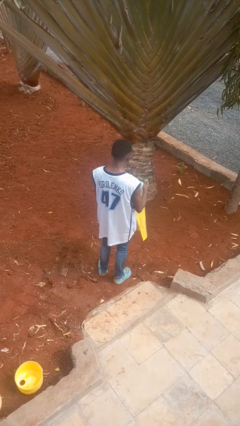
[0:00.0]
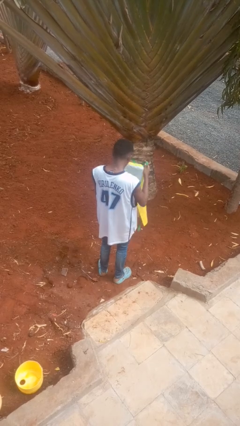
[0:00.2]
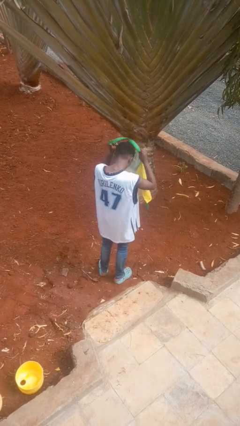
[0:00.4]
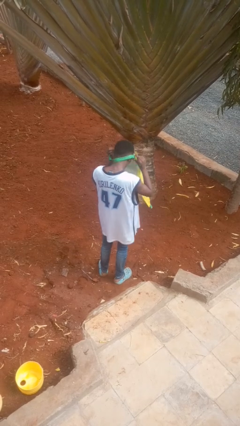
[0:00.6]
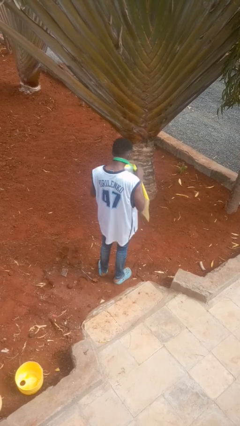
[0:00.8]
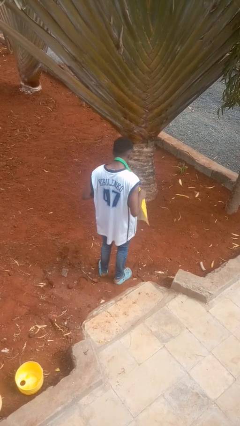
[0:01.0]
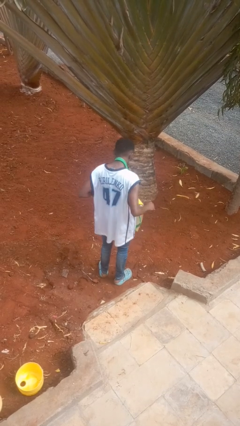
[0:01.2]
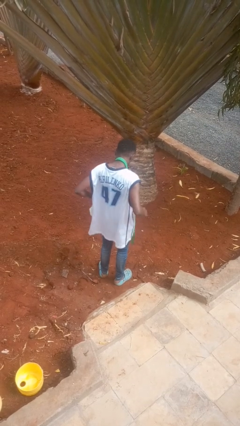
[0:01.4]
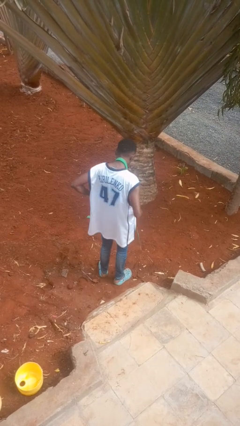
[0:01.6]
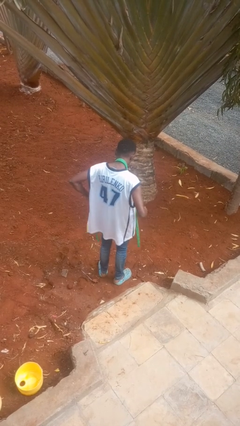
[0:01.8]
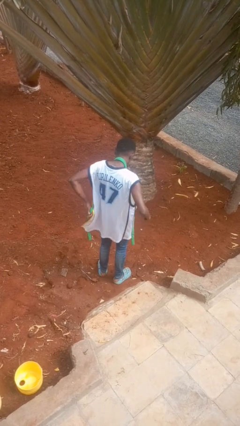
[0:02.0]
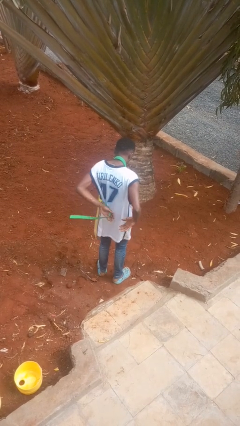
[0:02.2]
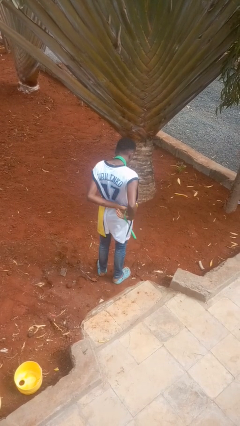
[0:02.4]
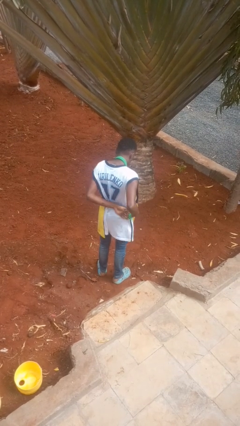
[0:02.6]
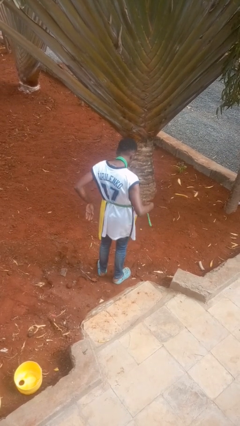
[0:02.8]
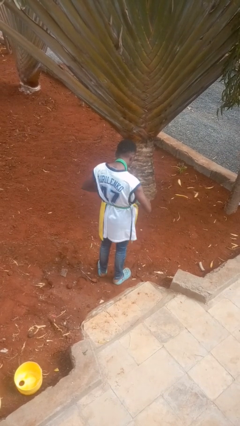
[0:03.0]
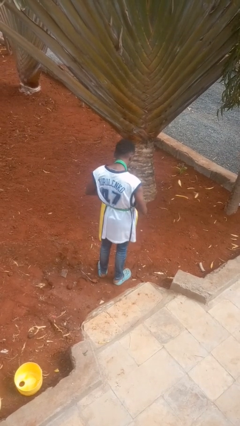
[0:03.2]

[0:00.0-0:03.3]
person puts on apron

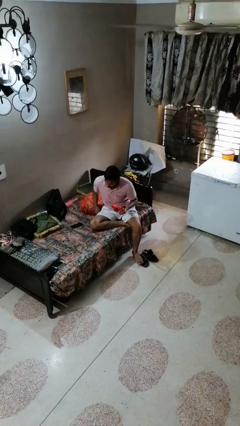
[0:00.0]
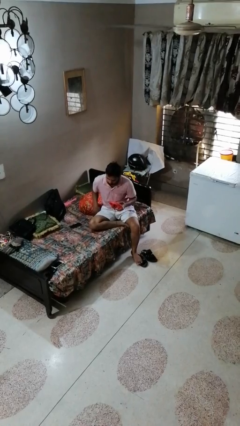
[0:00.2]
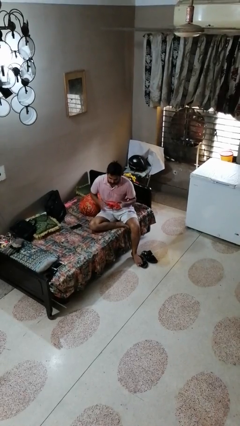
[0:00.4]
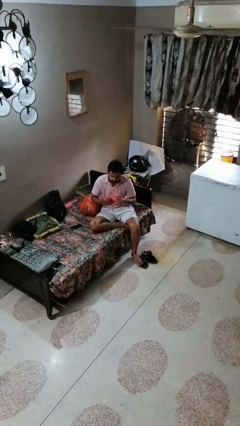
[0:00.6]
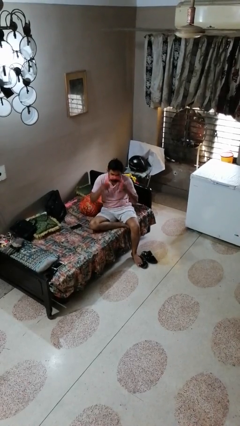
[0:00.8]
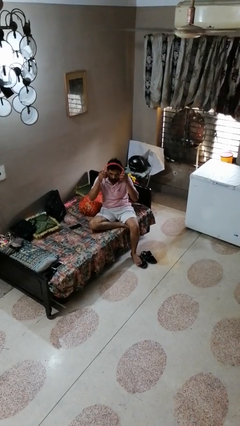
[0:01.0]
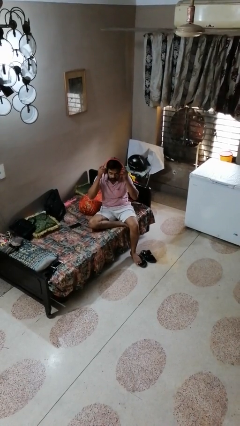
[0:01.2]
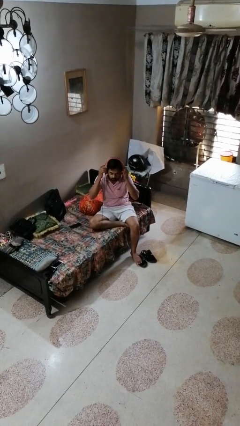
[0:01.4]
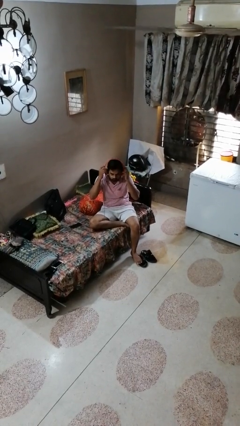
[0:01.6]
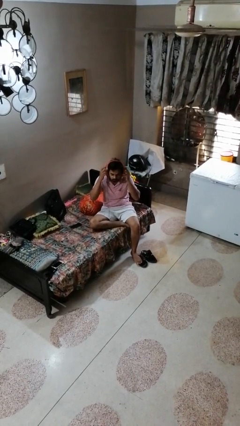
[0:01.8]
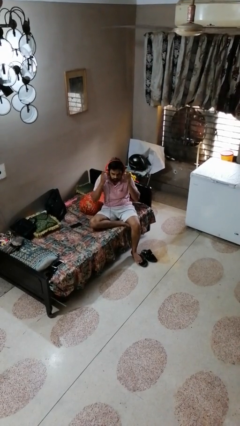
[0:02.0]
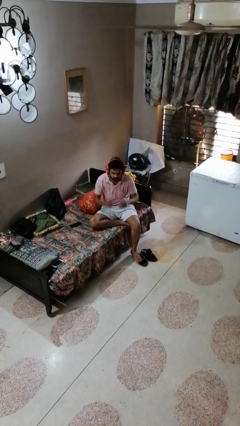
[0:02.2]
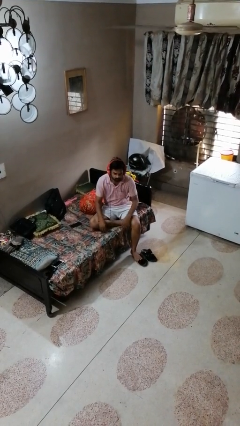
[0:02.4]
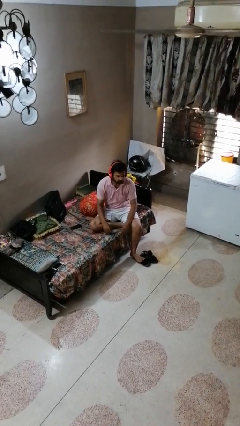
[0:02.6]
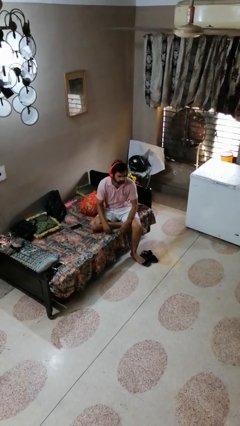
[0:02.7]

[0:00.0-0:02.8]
person puts on headphones

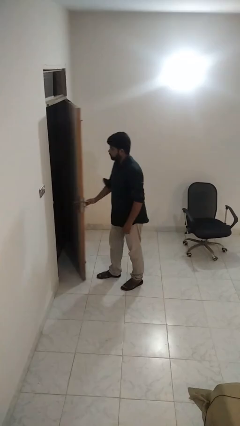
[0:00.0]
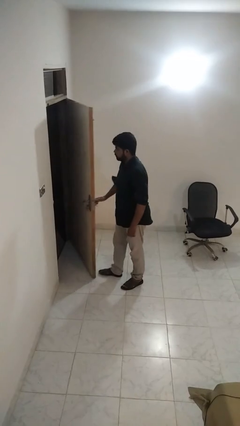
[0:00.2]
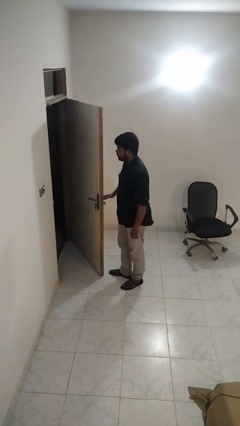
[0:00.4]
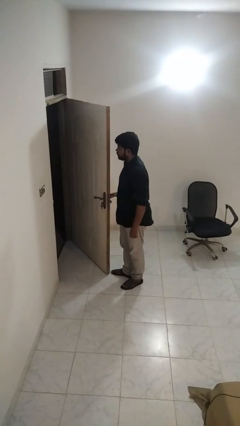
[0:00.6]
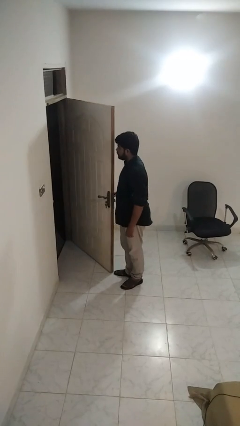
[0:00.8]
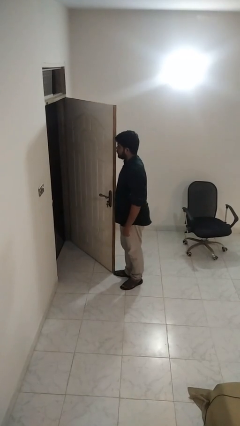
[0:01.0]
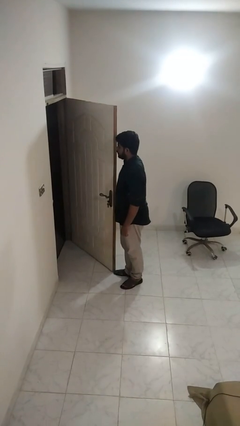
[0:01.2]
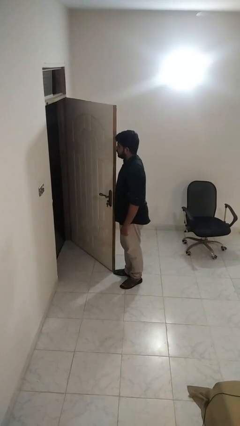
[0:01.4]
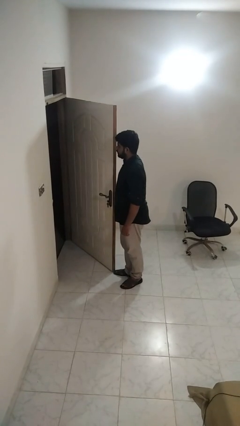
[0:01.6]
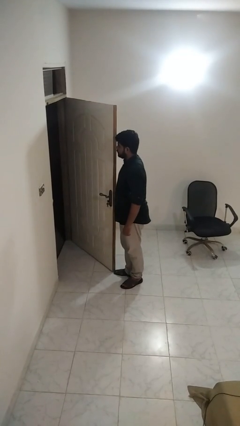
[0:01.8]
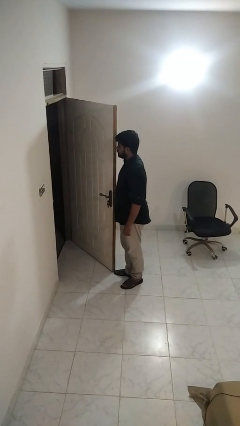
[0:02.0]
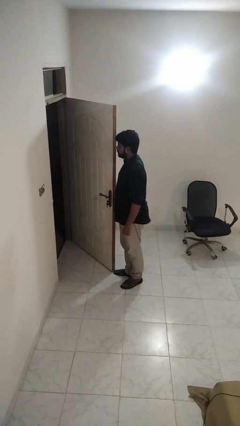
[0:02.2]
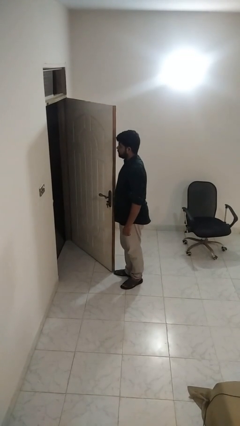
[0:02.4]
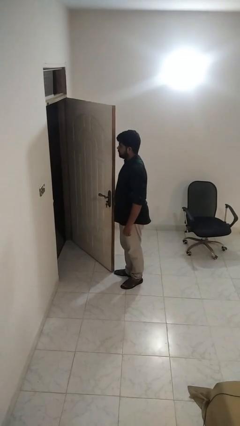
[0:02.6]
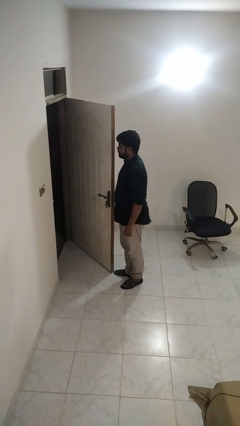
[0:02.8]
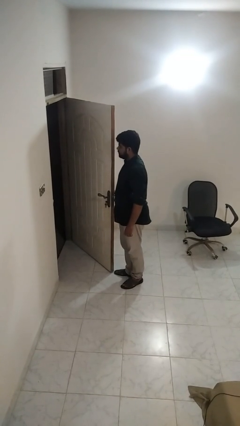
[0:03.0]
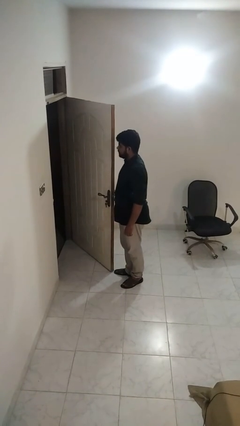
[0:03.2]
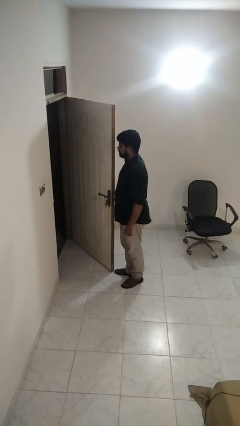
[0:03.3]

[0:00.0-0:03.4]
person opens facility door

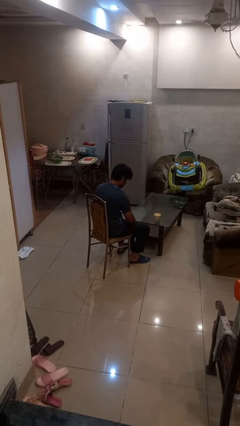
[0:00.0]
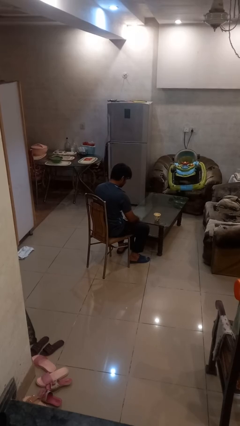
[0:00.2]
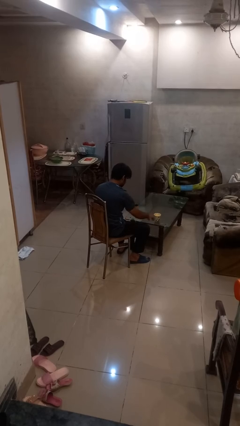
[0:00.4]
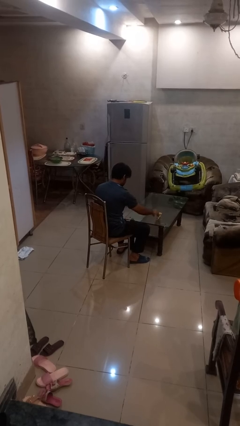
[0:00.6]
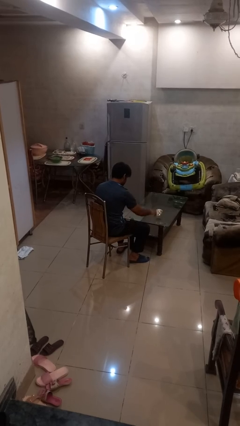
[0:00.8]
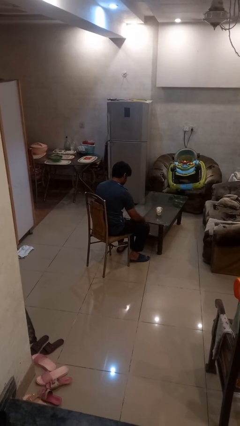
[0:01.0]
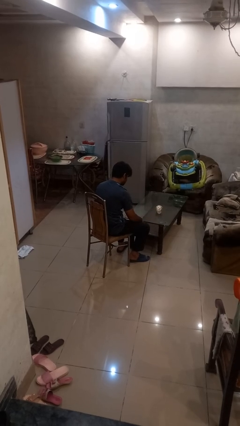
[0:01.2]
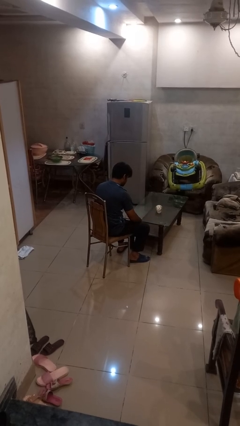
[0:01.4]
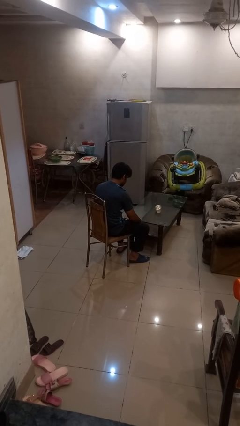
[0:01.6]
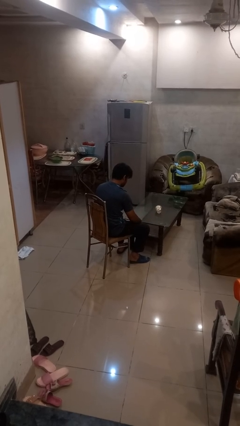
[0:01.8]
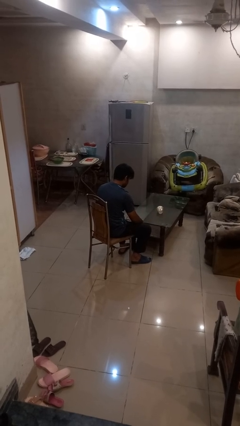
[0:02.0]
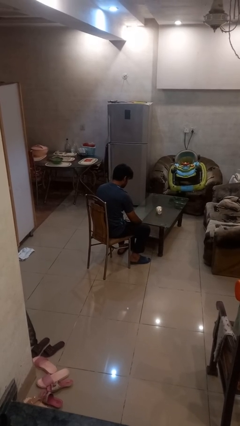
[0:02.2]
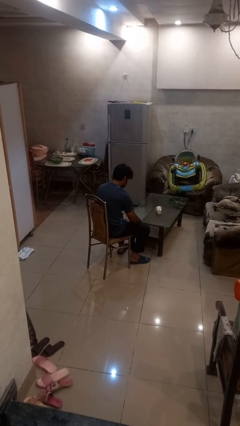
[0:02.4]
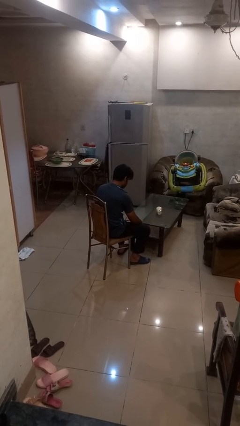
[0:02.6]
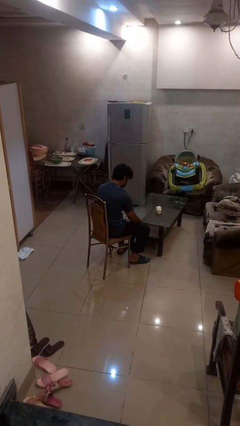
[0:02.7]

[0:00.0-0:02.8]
person knocks over glass

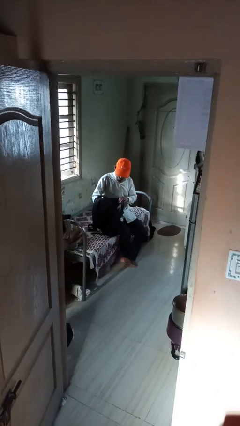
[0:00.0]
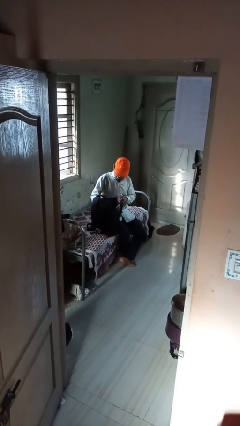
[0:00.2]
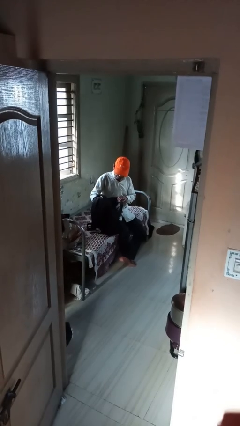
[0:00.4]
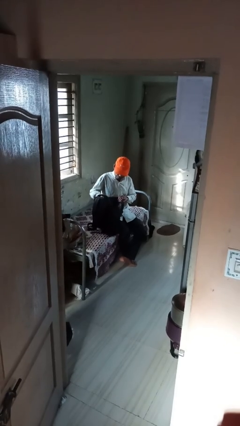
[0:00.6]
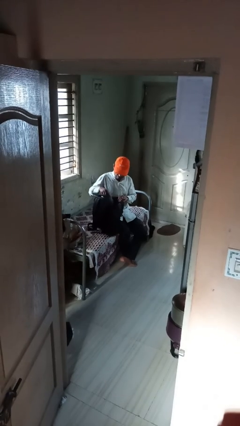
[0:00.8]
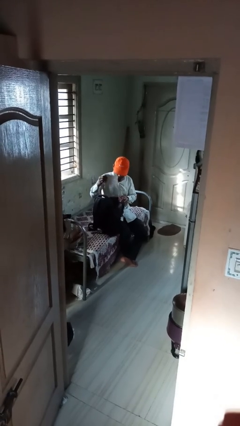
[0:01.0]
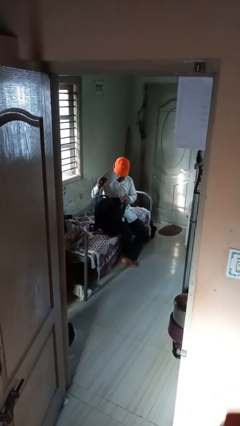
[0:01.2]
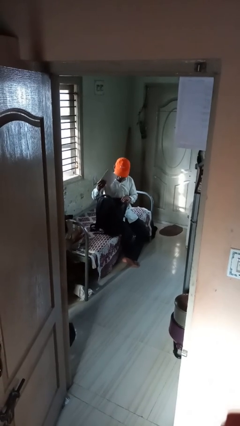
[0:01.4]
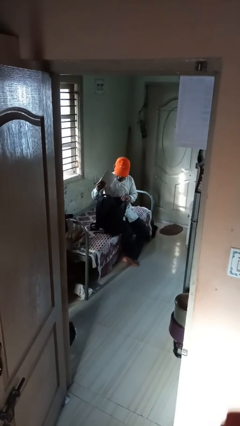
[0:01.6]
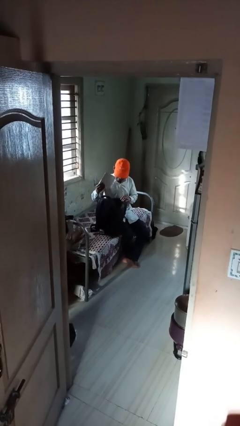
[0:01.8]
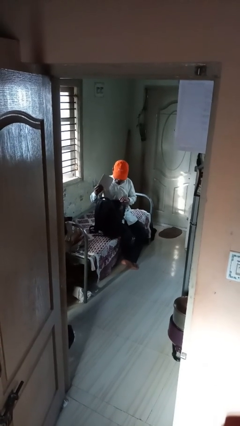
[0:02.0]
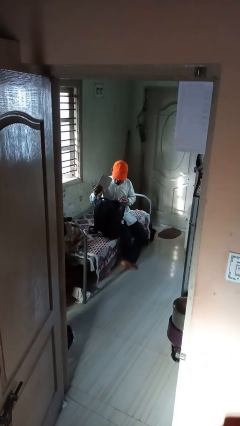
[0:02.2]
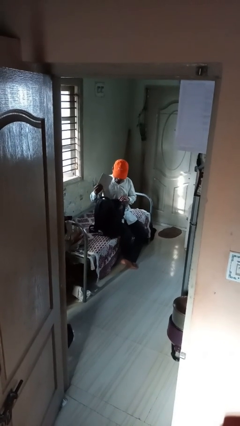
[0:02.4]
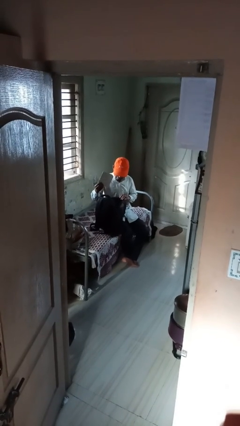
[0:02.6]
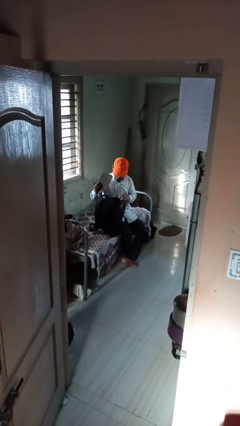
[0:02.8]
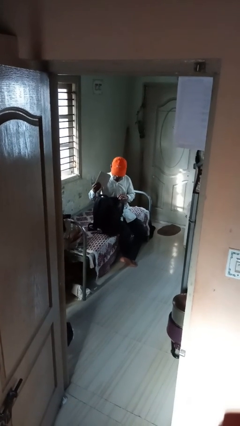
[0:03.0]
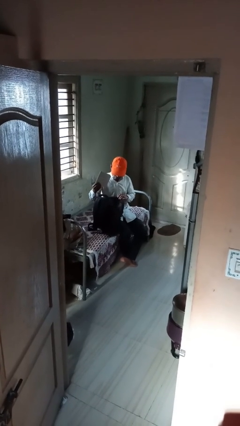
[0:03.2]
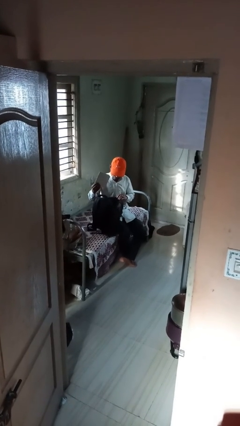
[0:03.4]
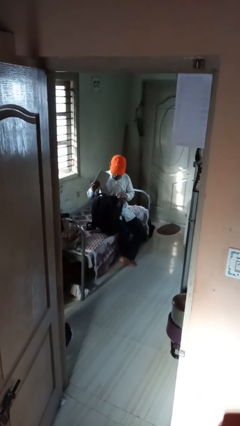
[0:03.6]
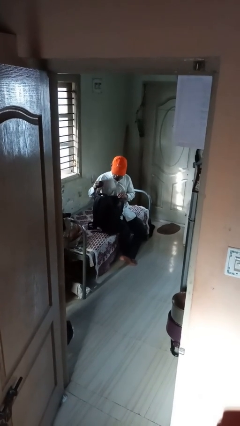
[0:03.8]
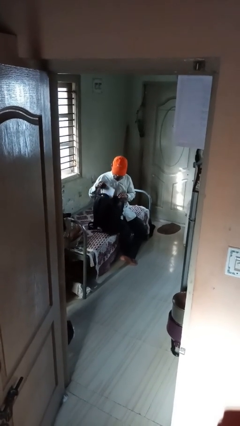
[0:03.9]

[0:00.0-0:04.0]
person takes object from backpack

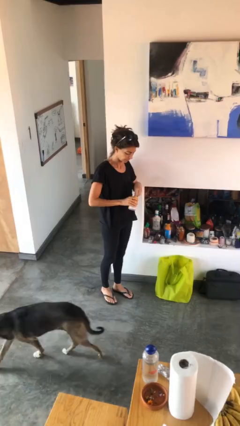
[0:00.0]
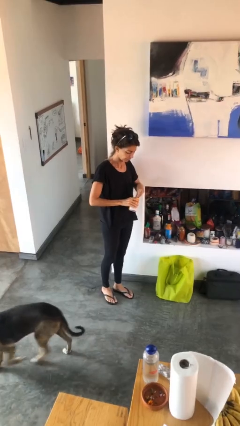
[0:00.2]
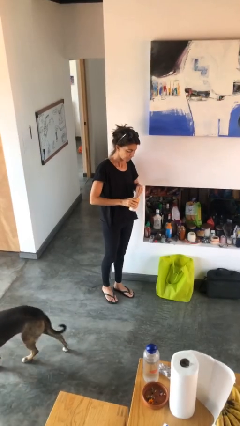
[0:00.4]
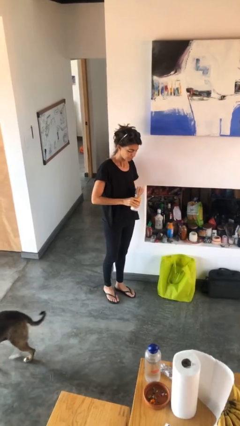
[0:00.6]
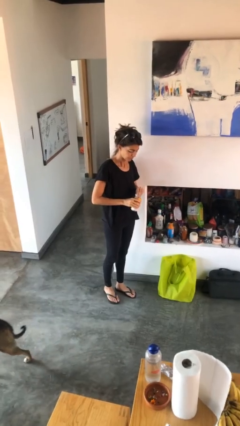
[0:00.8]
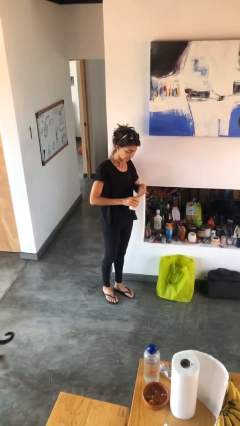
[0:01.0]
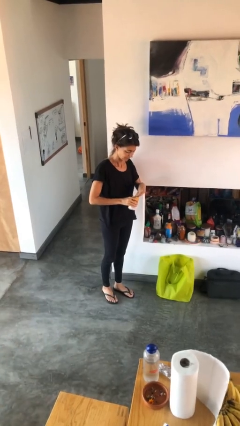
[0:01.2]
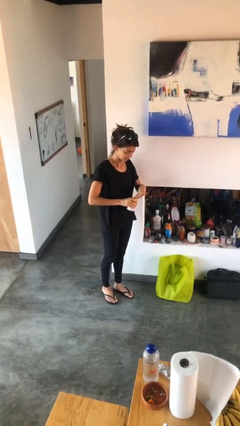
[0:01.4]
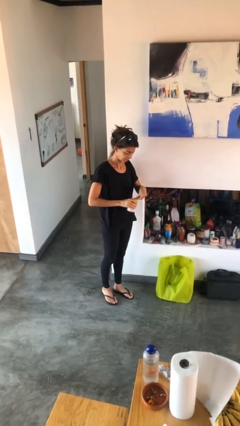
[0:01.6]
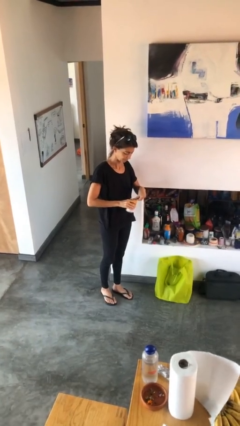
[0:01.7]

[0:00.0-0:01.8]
person opens beverage can
